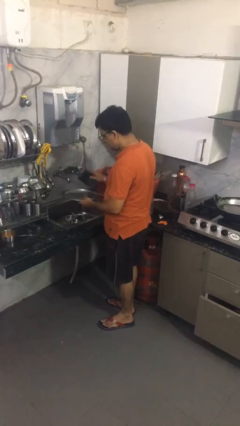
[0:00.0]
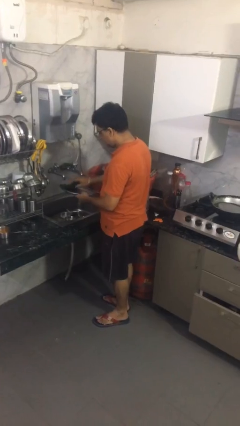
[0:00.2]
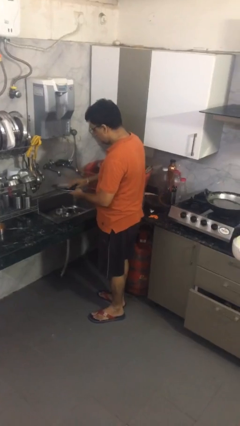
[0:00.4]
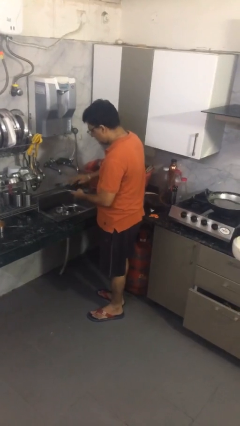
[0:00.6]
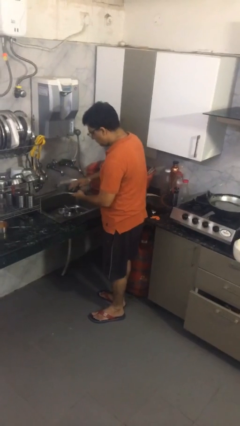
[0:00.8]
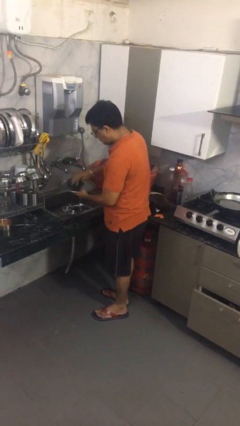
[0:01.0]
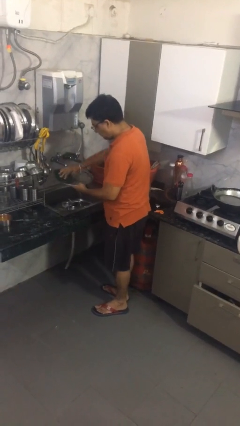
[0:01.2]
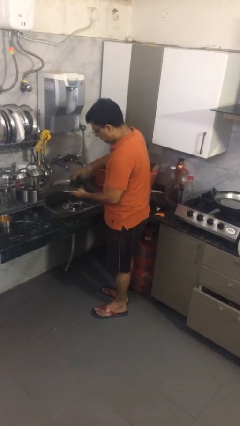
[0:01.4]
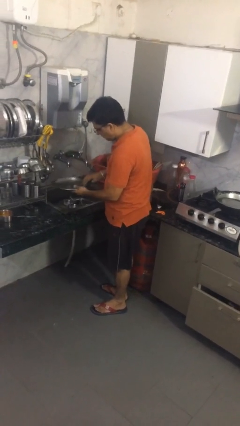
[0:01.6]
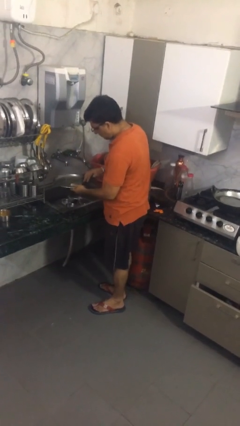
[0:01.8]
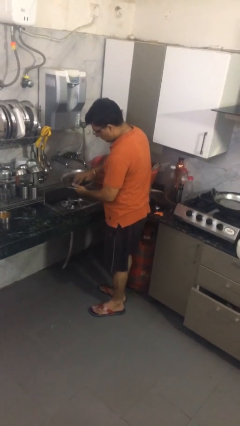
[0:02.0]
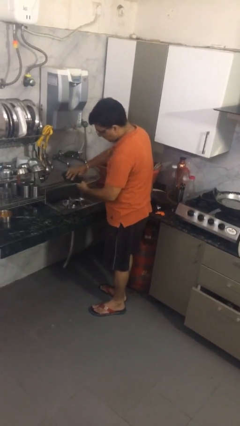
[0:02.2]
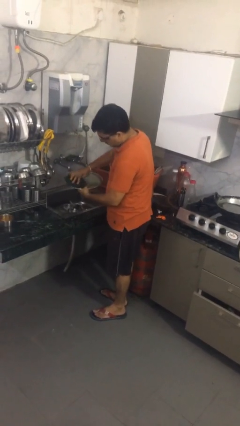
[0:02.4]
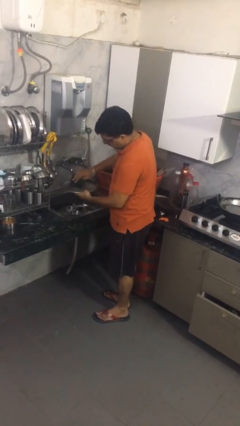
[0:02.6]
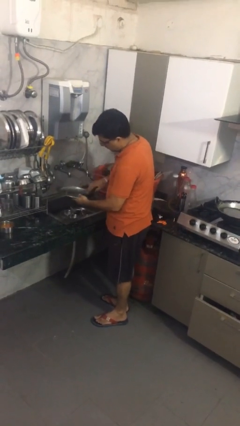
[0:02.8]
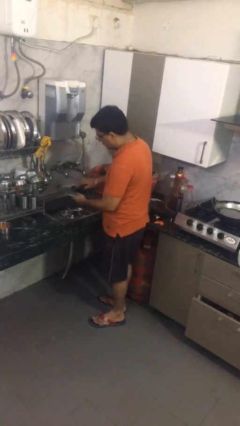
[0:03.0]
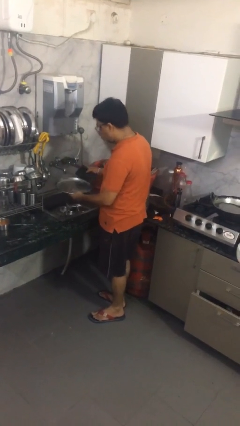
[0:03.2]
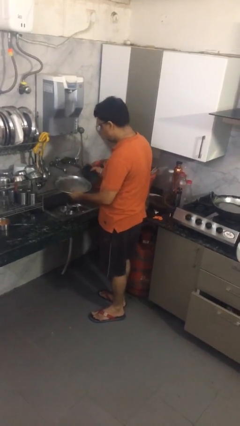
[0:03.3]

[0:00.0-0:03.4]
person washes dish

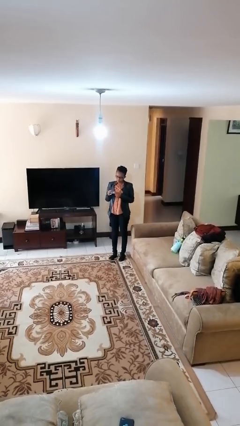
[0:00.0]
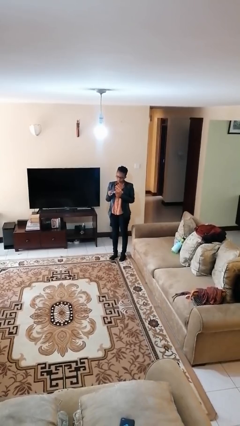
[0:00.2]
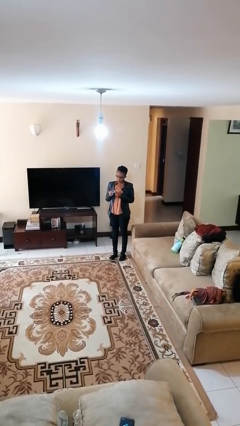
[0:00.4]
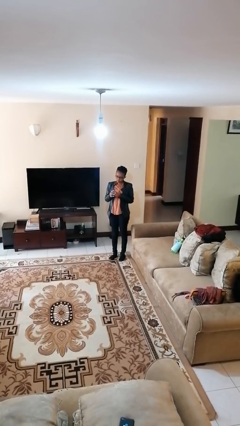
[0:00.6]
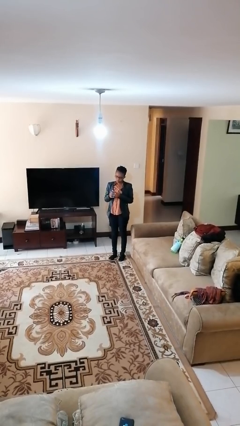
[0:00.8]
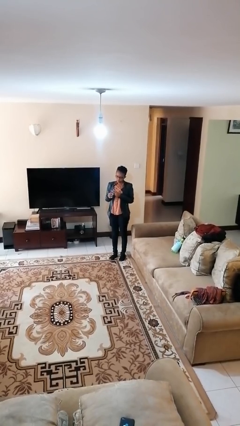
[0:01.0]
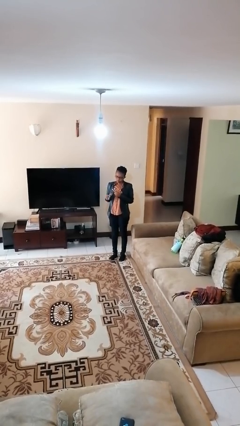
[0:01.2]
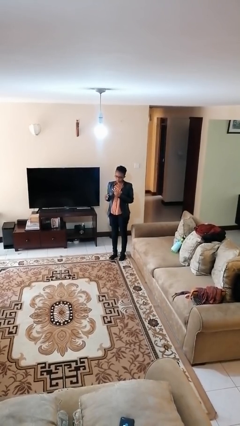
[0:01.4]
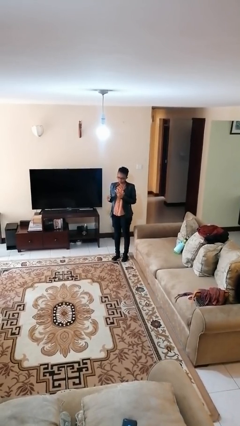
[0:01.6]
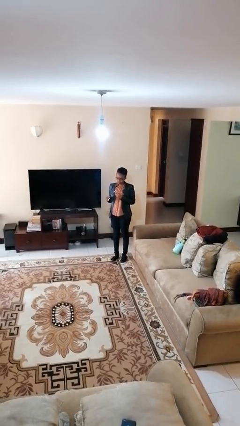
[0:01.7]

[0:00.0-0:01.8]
person puts on ring

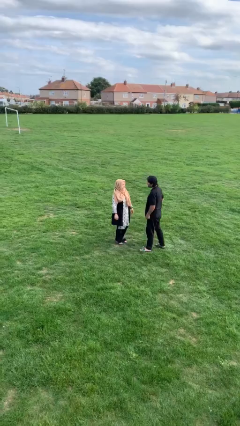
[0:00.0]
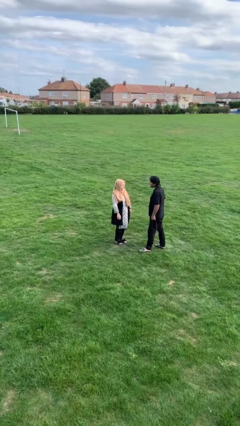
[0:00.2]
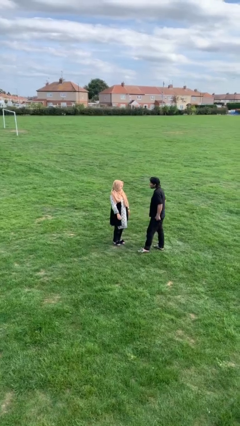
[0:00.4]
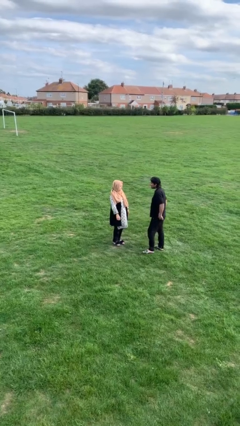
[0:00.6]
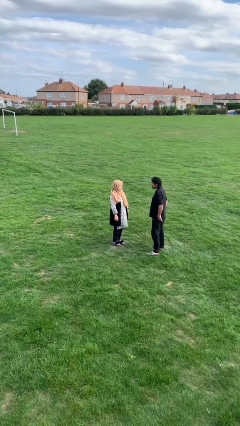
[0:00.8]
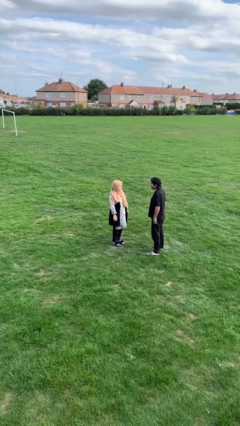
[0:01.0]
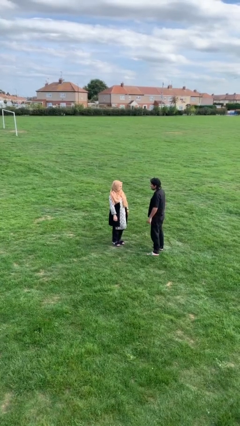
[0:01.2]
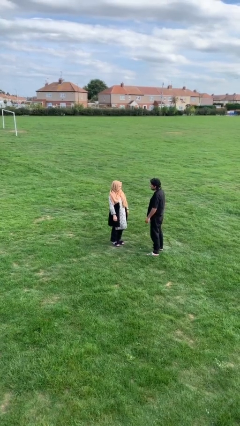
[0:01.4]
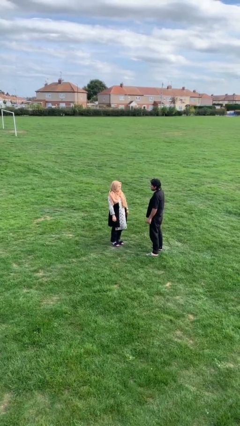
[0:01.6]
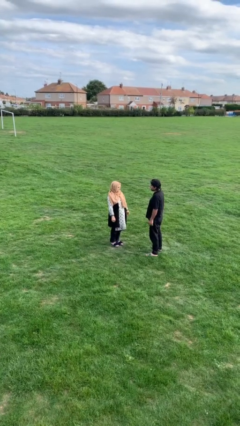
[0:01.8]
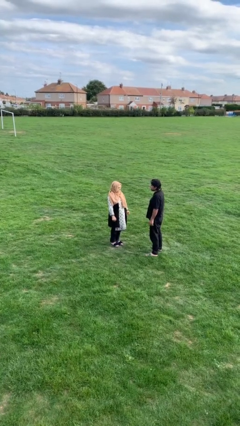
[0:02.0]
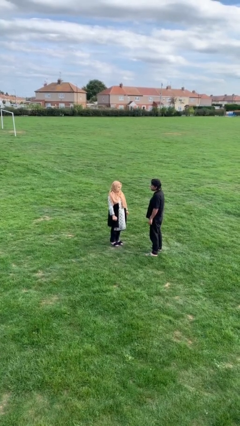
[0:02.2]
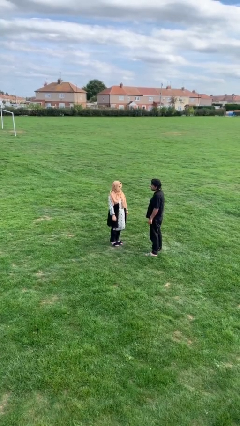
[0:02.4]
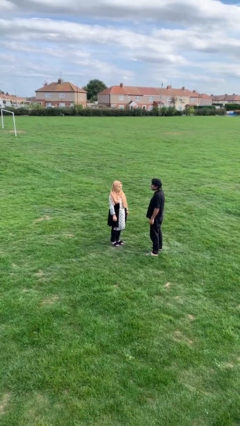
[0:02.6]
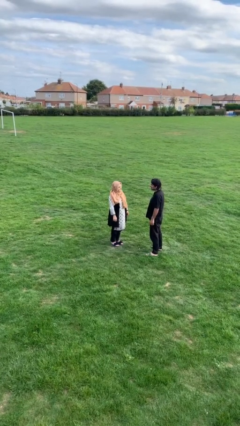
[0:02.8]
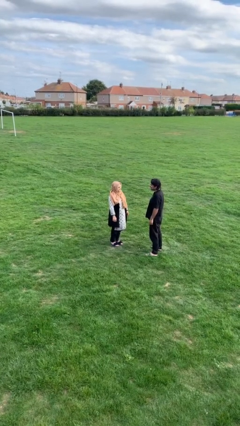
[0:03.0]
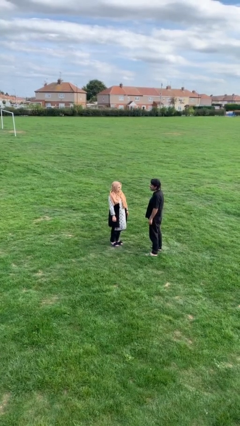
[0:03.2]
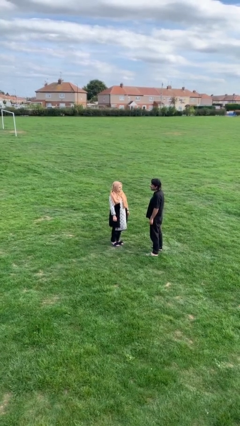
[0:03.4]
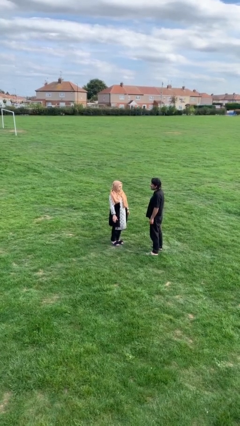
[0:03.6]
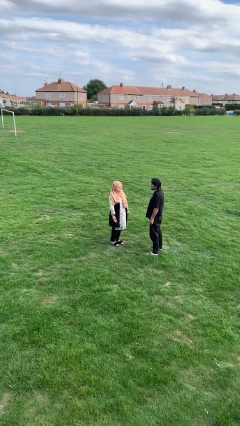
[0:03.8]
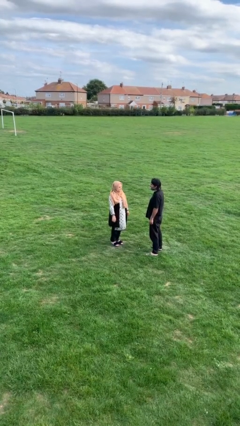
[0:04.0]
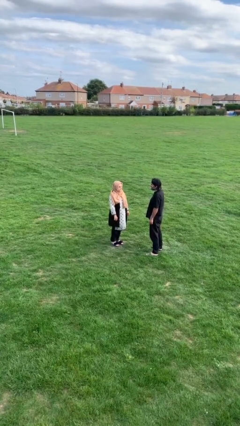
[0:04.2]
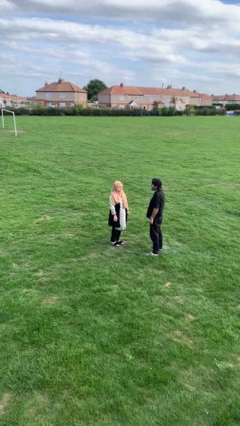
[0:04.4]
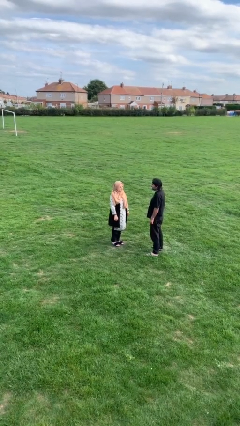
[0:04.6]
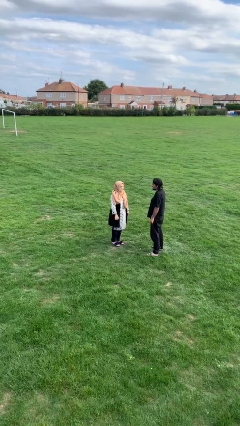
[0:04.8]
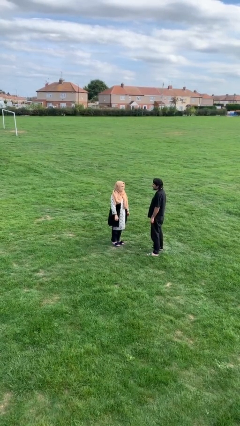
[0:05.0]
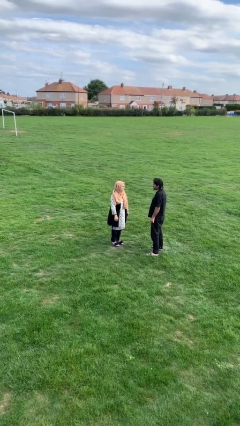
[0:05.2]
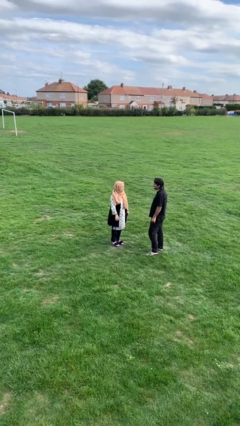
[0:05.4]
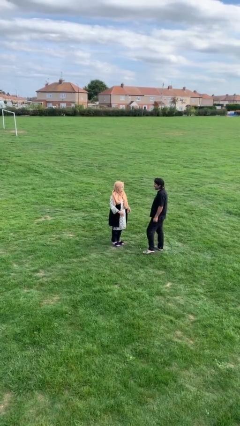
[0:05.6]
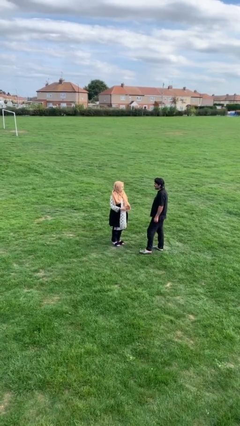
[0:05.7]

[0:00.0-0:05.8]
person talks to person

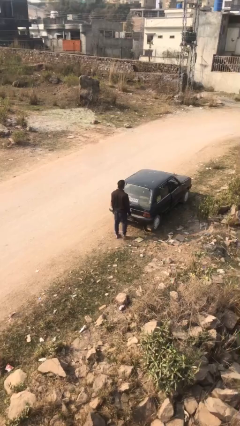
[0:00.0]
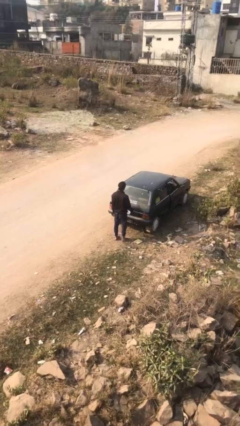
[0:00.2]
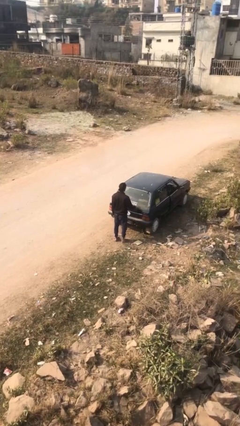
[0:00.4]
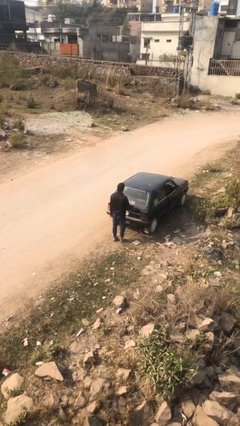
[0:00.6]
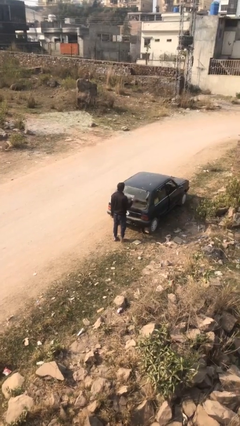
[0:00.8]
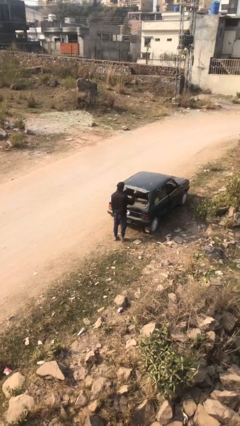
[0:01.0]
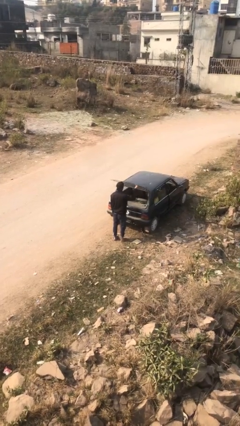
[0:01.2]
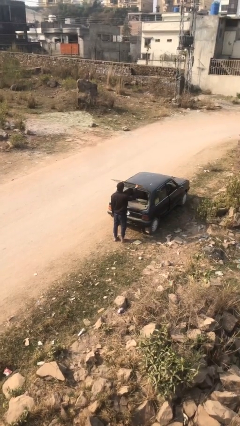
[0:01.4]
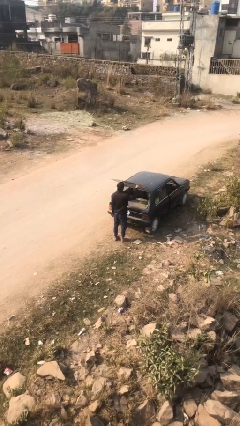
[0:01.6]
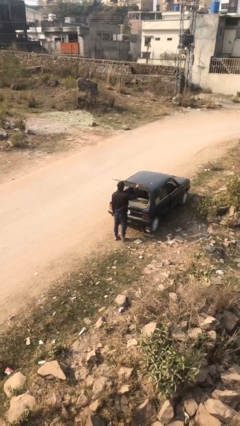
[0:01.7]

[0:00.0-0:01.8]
person opens car trunk

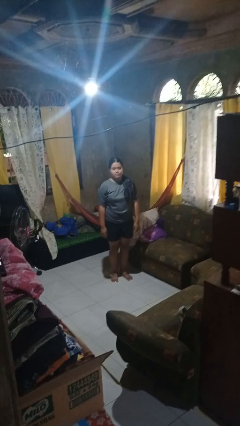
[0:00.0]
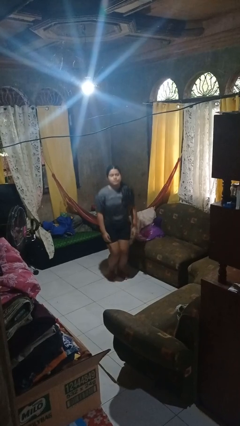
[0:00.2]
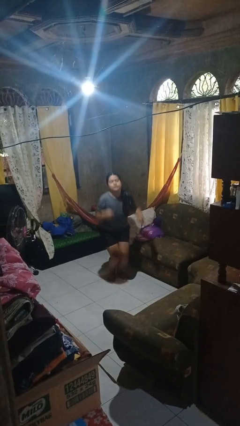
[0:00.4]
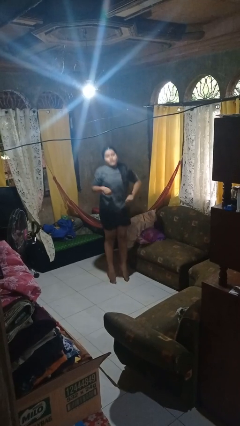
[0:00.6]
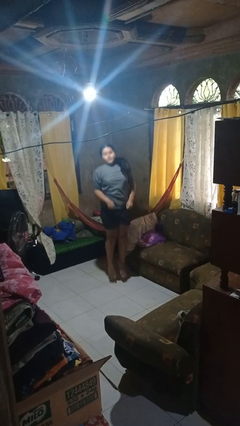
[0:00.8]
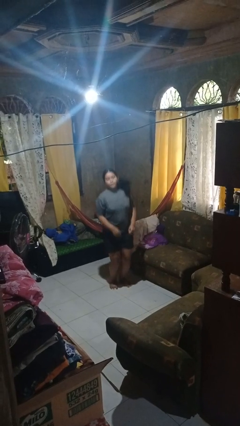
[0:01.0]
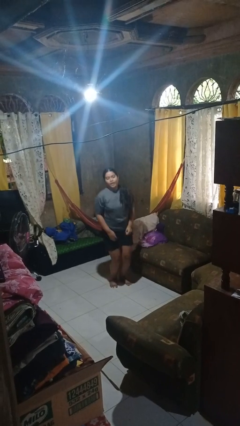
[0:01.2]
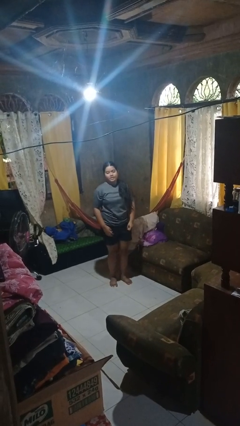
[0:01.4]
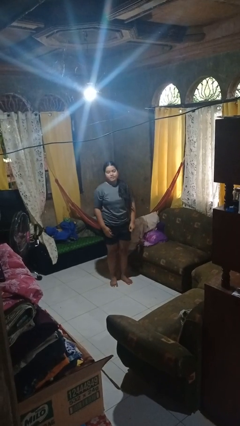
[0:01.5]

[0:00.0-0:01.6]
person jumps

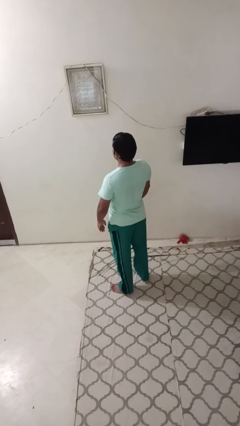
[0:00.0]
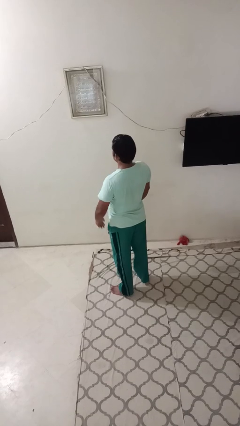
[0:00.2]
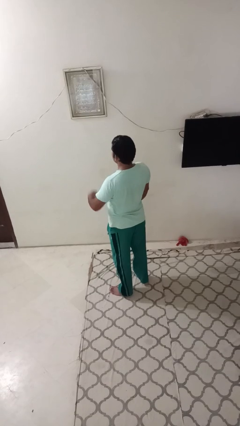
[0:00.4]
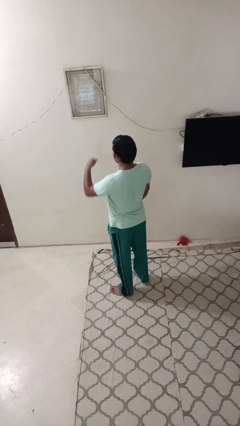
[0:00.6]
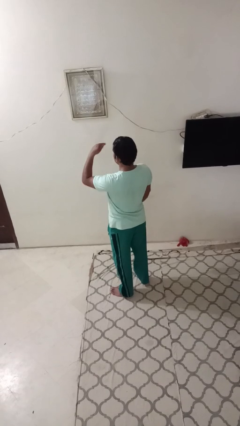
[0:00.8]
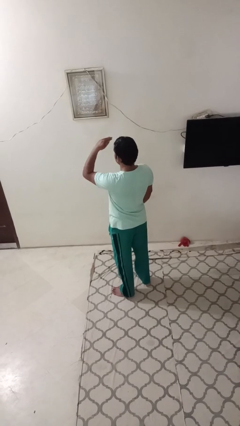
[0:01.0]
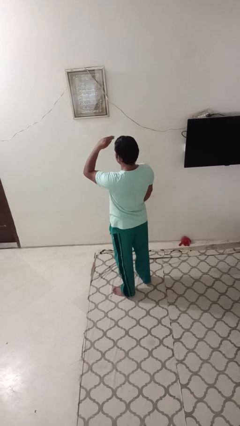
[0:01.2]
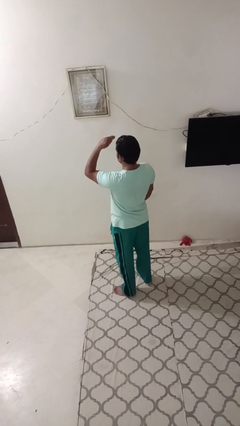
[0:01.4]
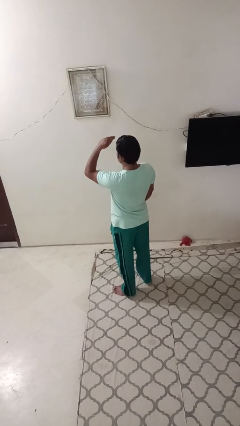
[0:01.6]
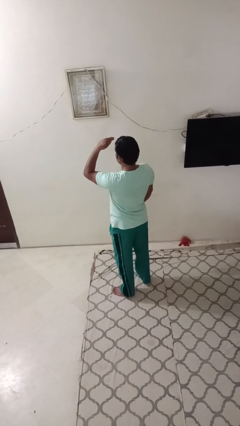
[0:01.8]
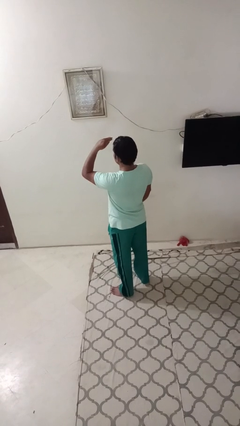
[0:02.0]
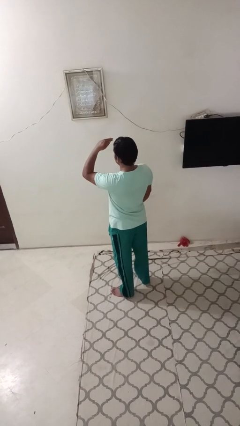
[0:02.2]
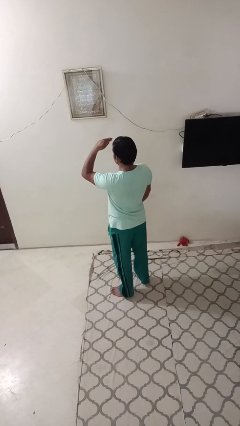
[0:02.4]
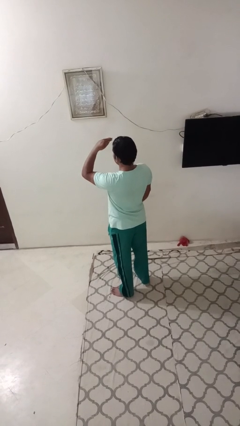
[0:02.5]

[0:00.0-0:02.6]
person gestures swipe up

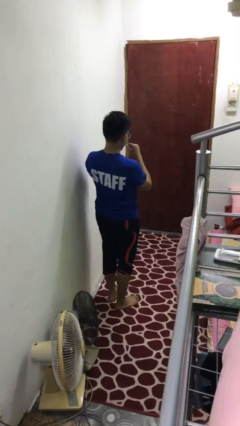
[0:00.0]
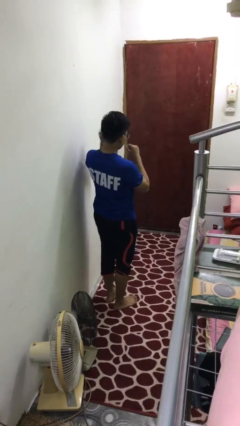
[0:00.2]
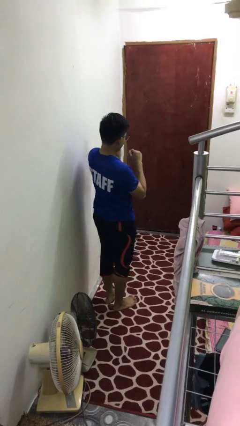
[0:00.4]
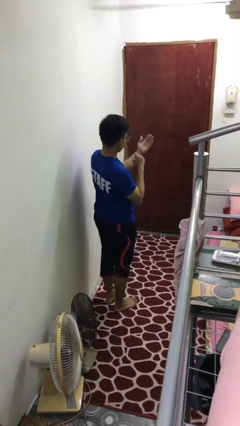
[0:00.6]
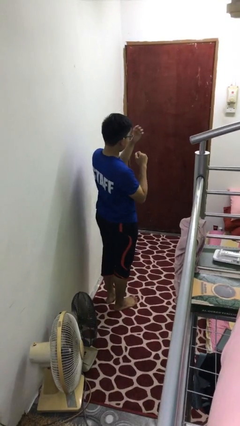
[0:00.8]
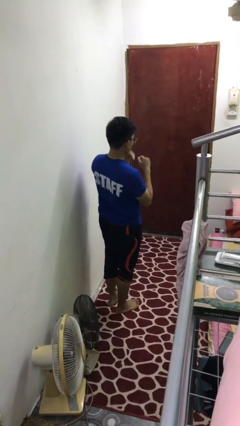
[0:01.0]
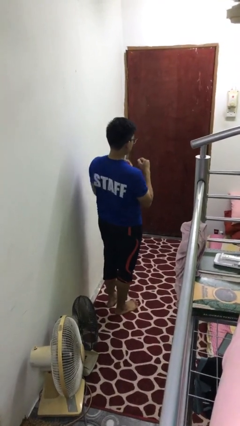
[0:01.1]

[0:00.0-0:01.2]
person karate chop
